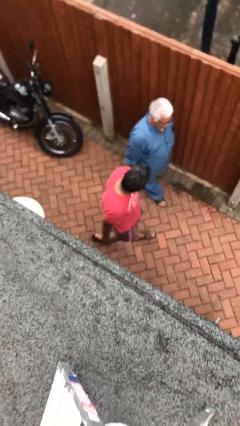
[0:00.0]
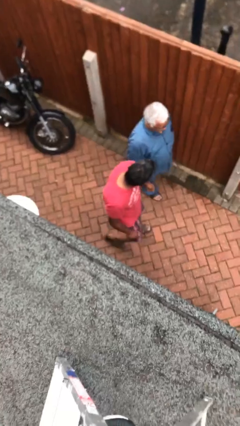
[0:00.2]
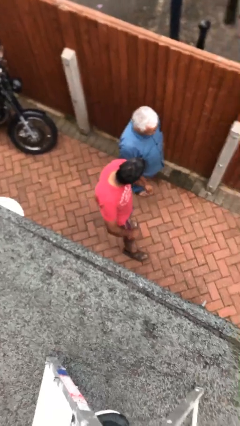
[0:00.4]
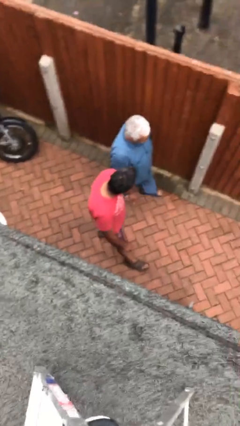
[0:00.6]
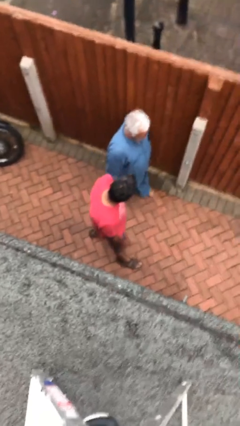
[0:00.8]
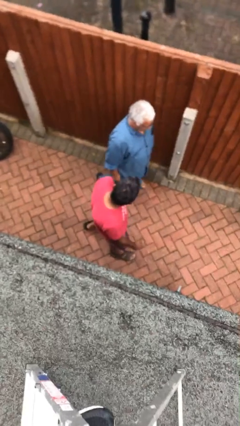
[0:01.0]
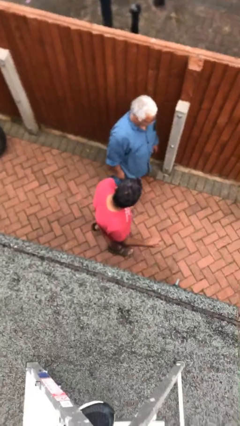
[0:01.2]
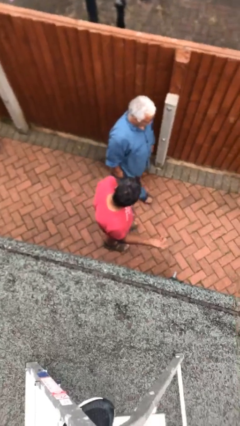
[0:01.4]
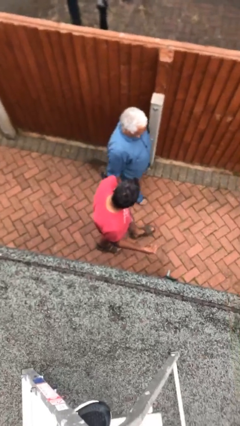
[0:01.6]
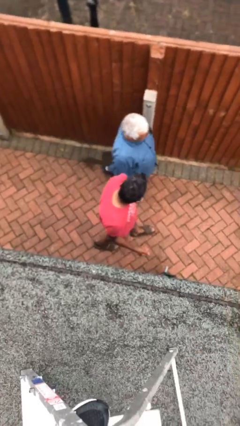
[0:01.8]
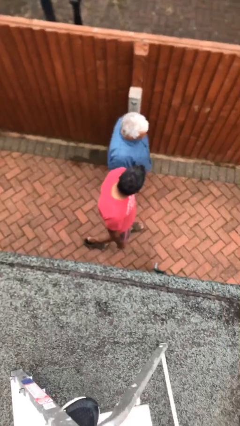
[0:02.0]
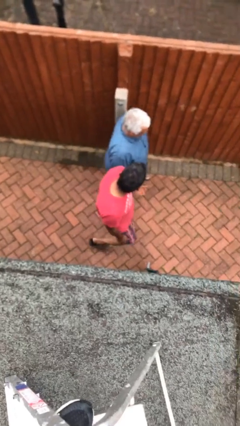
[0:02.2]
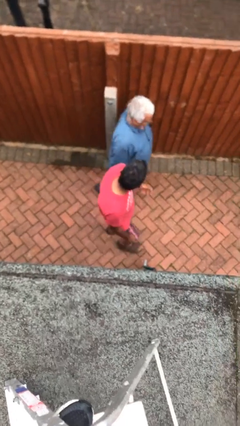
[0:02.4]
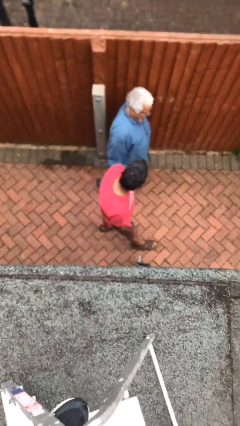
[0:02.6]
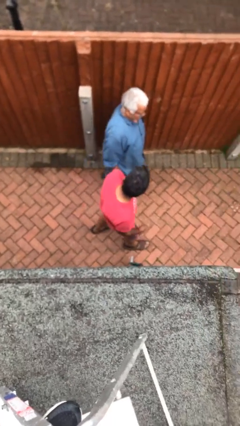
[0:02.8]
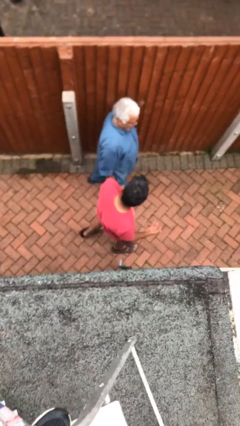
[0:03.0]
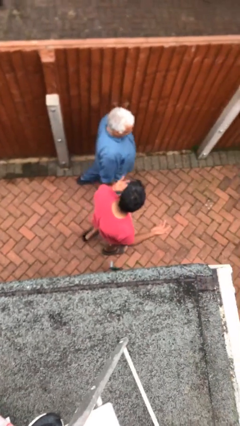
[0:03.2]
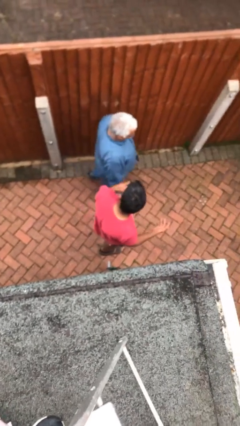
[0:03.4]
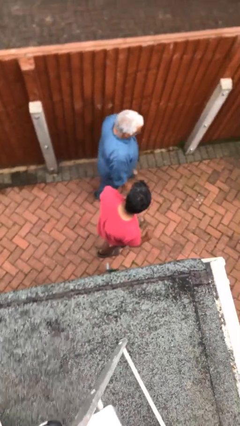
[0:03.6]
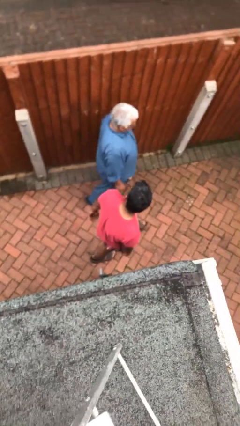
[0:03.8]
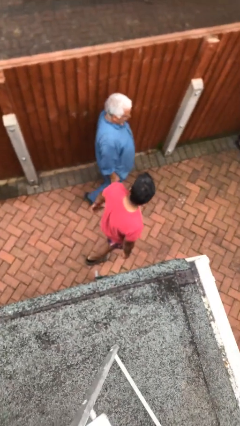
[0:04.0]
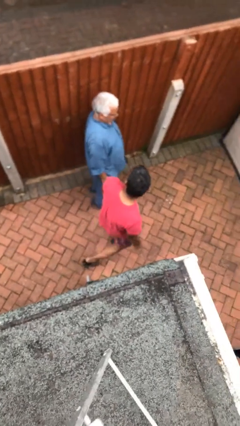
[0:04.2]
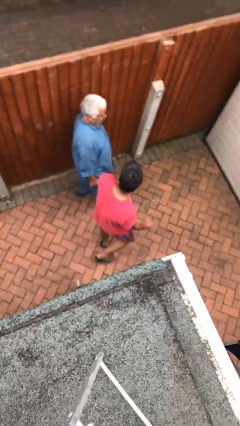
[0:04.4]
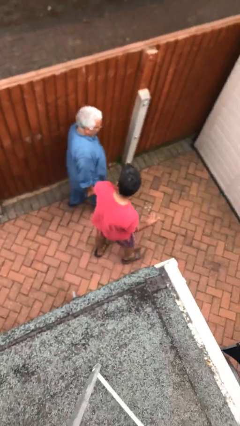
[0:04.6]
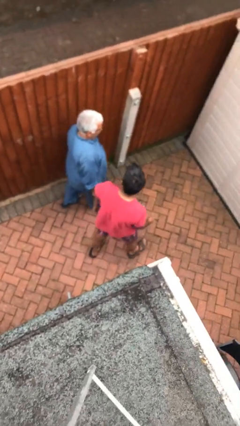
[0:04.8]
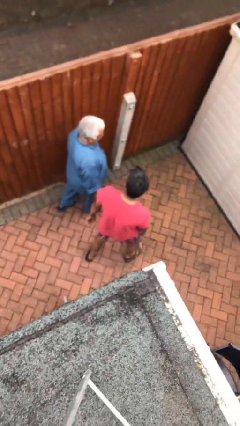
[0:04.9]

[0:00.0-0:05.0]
person talks to person

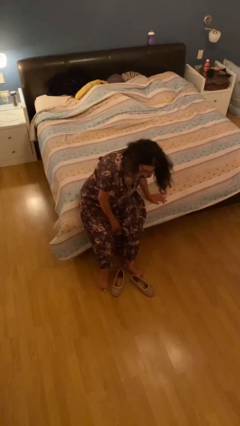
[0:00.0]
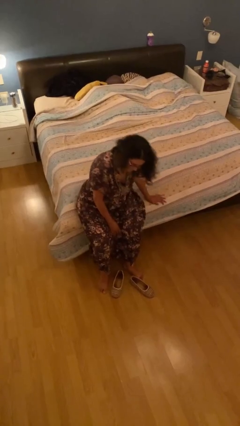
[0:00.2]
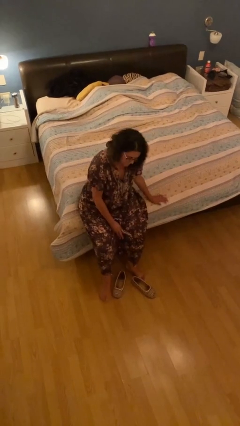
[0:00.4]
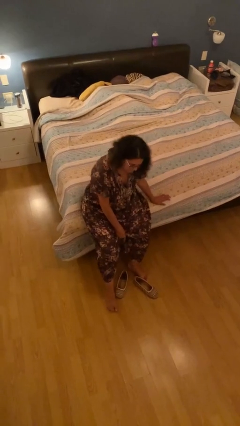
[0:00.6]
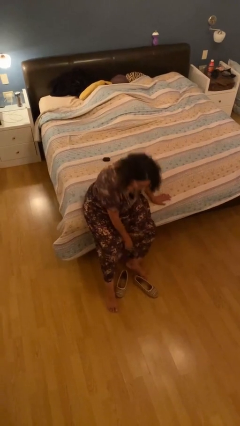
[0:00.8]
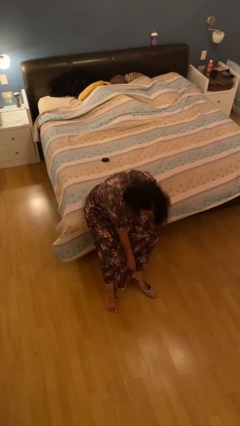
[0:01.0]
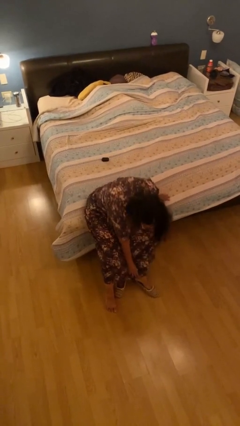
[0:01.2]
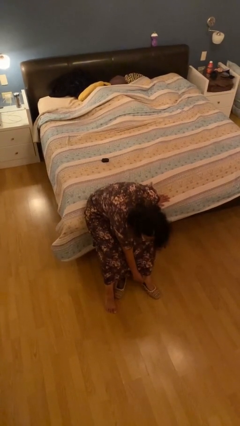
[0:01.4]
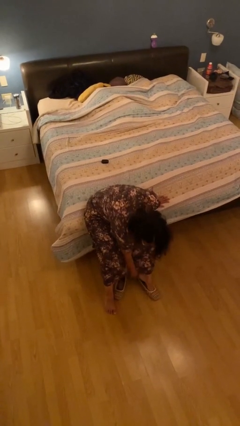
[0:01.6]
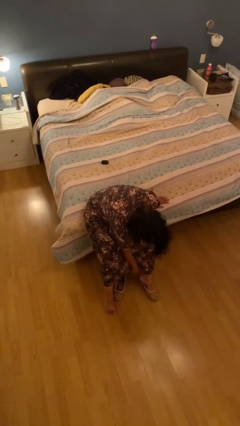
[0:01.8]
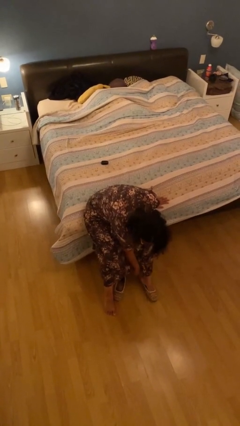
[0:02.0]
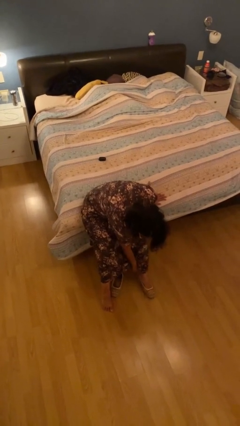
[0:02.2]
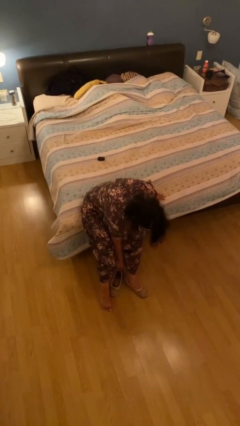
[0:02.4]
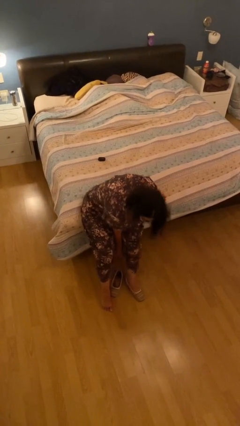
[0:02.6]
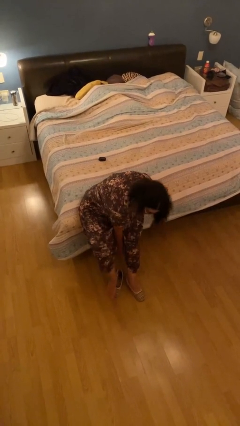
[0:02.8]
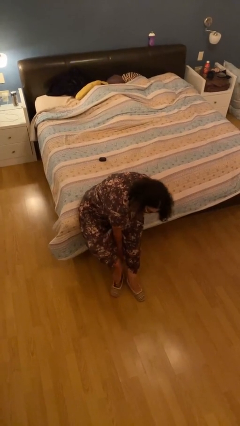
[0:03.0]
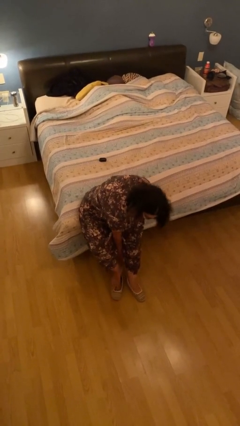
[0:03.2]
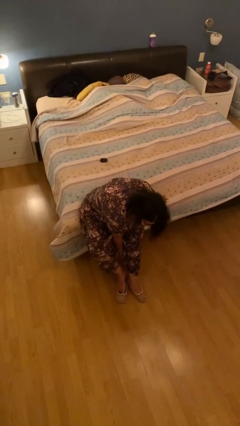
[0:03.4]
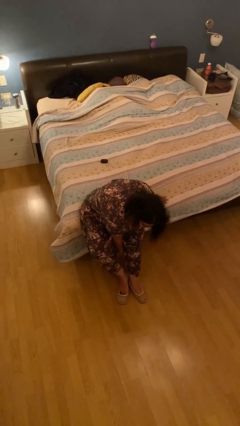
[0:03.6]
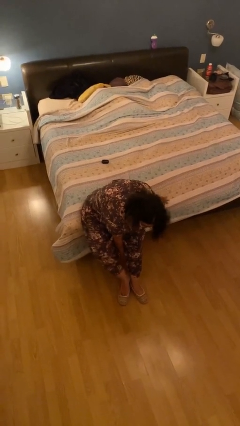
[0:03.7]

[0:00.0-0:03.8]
person puts on shoes

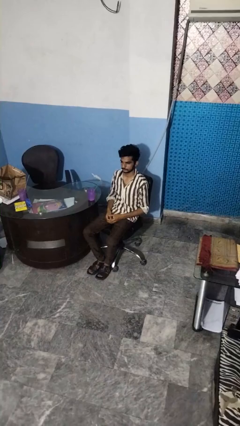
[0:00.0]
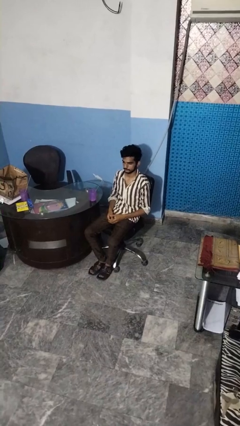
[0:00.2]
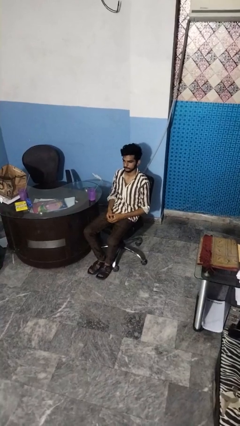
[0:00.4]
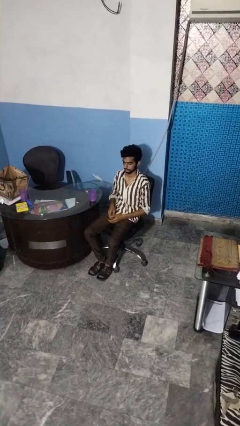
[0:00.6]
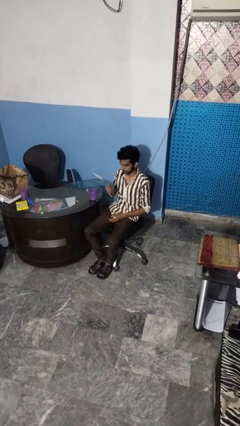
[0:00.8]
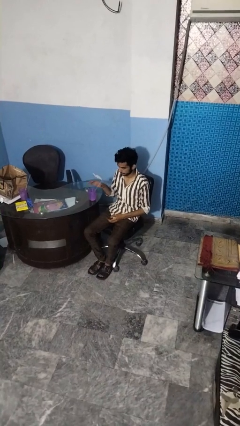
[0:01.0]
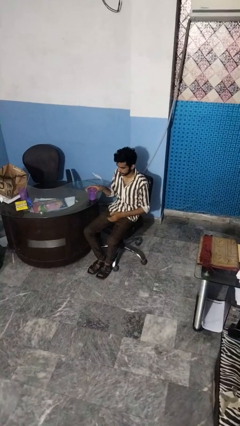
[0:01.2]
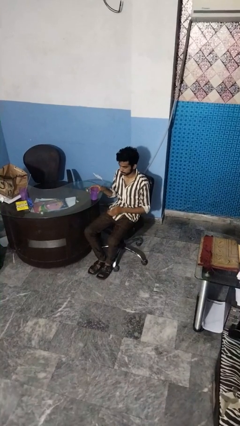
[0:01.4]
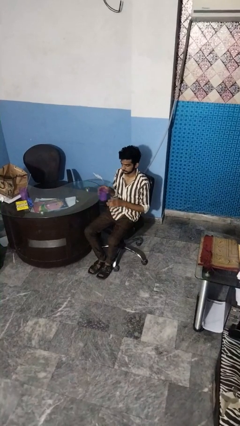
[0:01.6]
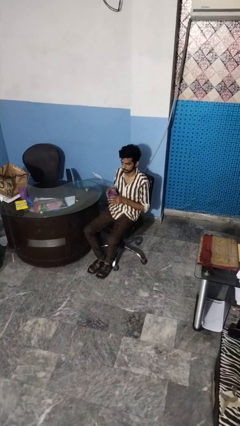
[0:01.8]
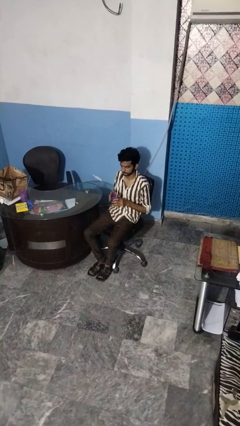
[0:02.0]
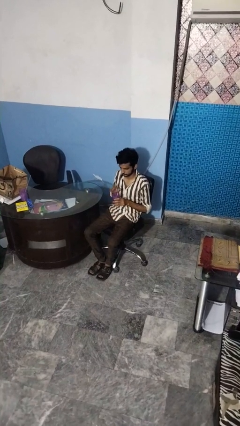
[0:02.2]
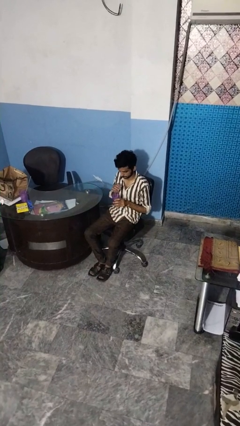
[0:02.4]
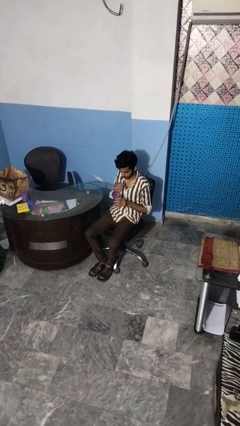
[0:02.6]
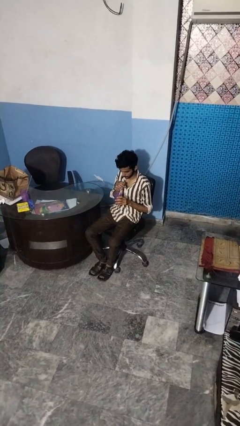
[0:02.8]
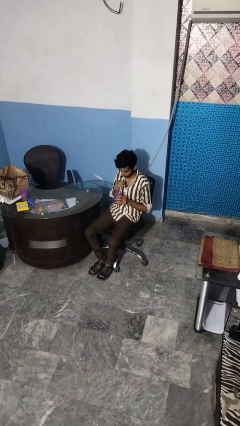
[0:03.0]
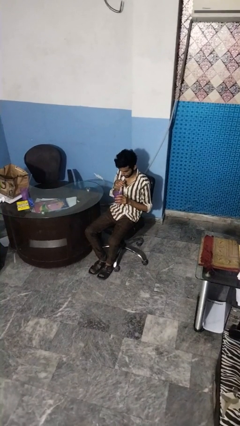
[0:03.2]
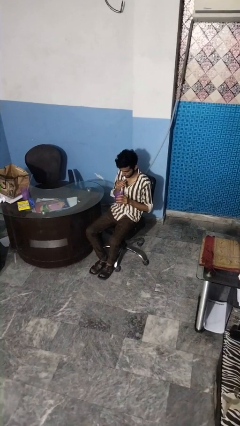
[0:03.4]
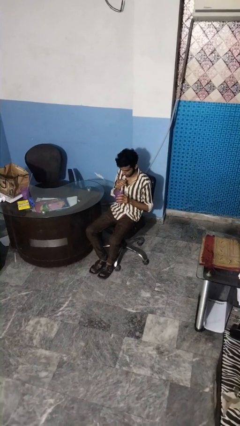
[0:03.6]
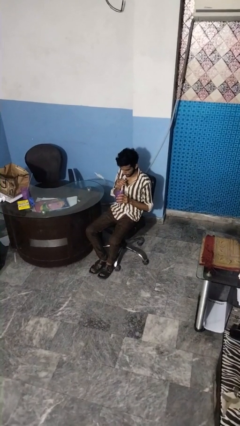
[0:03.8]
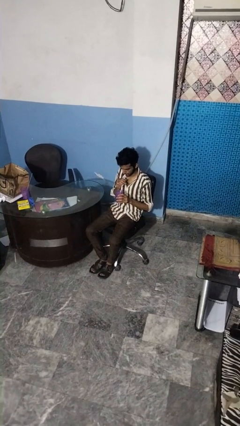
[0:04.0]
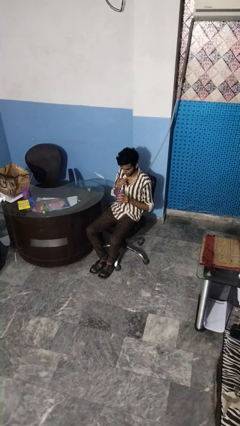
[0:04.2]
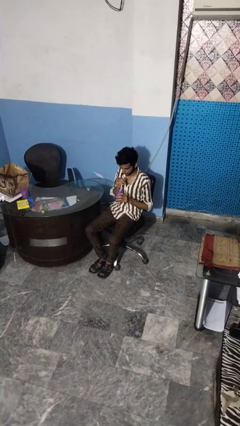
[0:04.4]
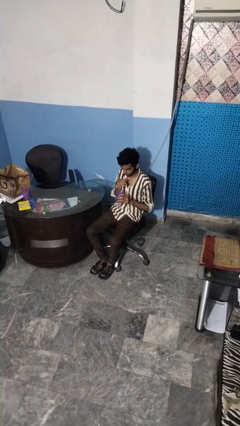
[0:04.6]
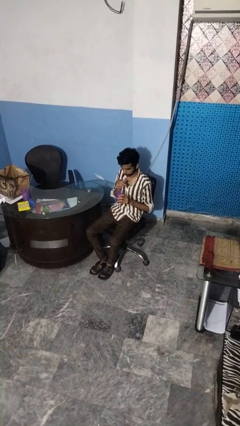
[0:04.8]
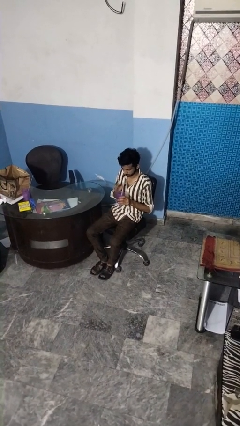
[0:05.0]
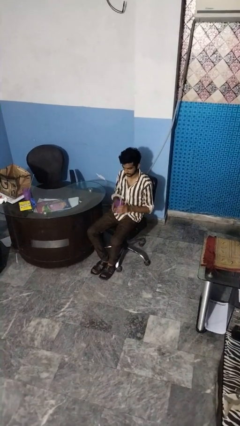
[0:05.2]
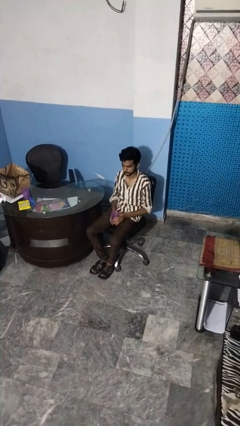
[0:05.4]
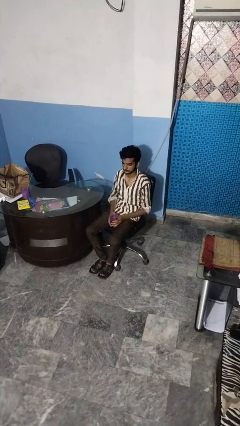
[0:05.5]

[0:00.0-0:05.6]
person drinks from straw

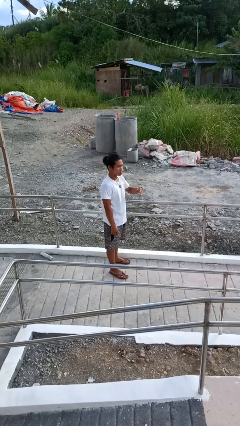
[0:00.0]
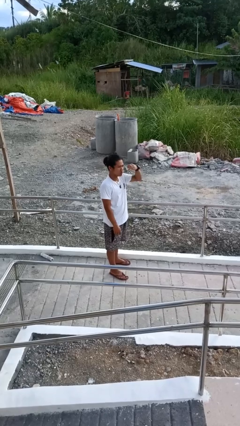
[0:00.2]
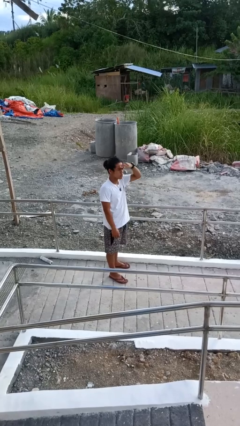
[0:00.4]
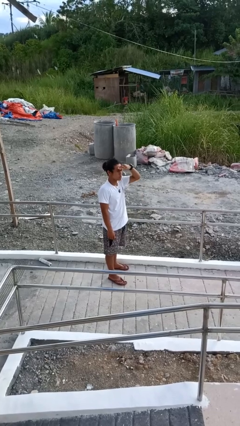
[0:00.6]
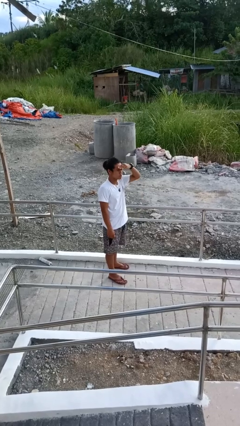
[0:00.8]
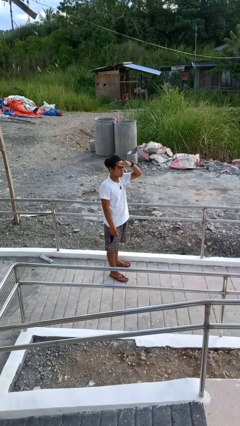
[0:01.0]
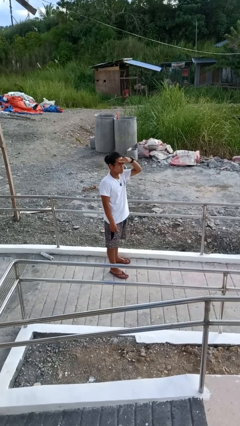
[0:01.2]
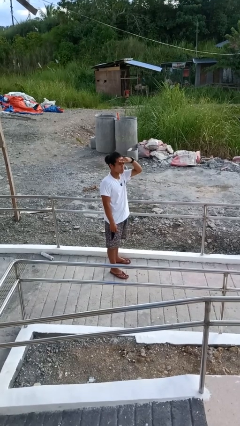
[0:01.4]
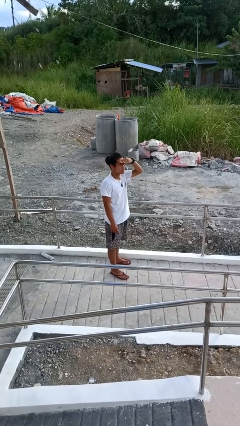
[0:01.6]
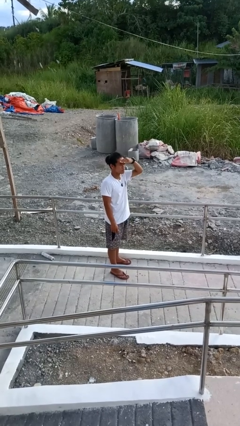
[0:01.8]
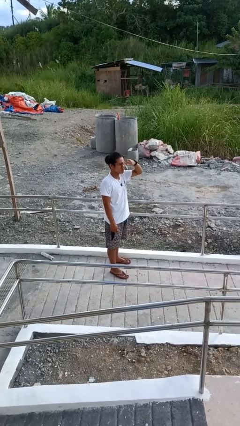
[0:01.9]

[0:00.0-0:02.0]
person shades eyes

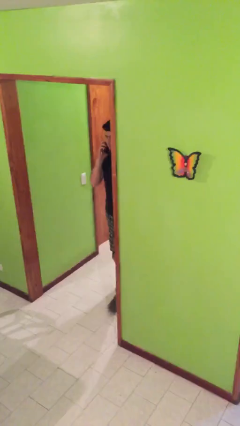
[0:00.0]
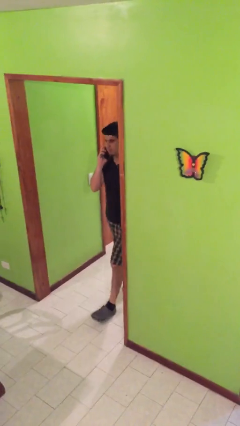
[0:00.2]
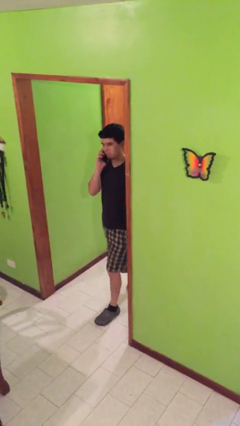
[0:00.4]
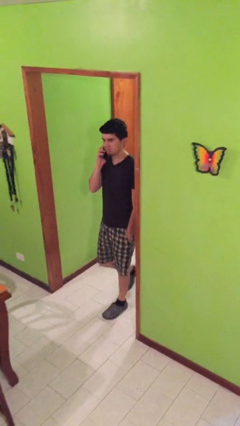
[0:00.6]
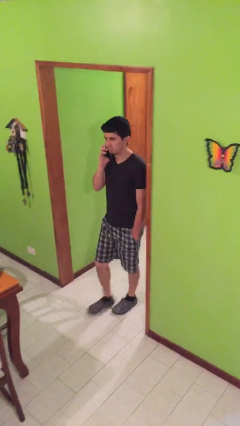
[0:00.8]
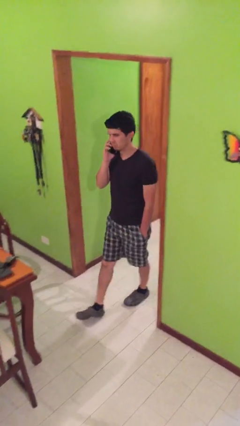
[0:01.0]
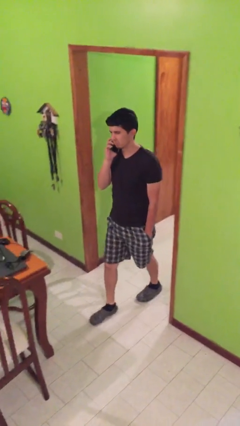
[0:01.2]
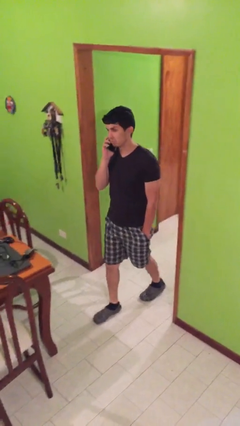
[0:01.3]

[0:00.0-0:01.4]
person enters scene through structure
